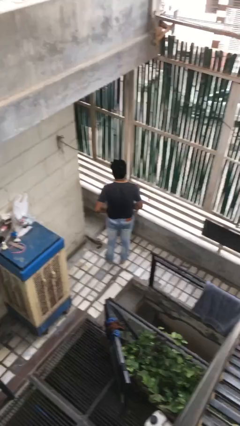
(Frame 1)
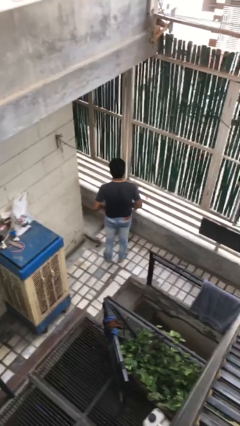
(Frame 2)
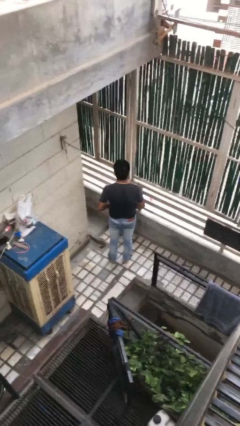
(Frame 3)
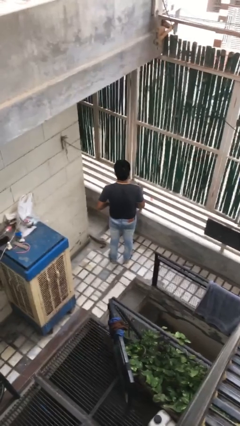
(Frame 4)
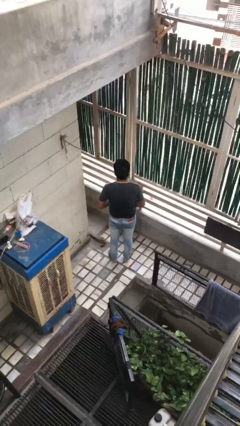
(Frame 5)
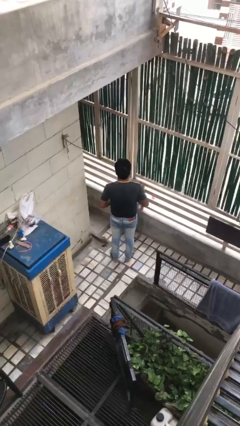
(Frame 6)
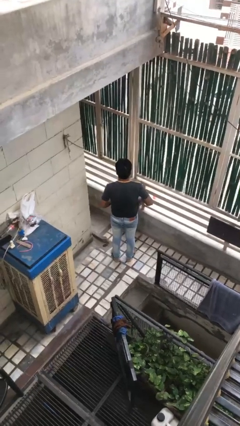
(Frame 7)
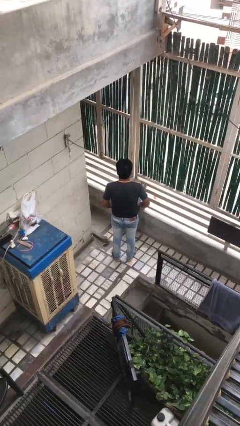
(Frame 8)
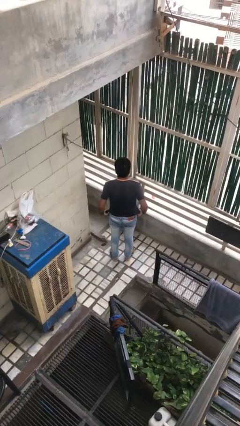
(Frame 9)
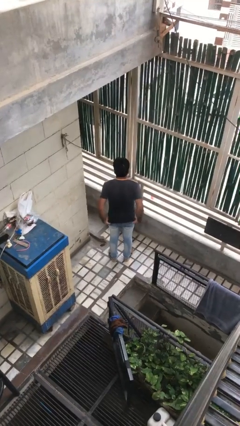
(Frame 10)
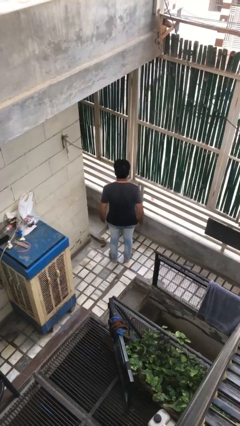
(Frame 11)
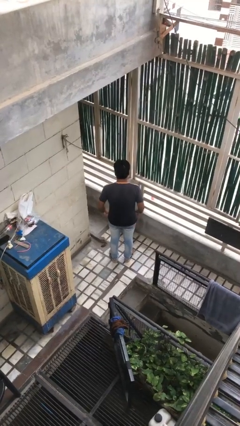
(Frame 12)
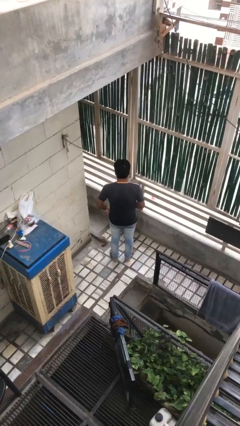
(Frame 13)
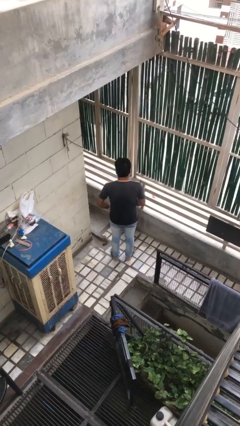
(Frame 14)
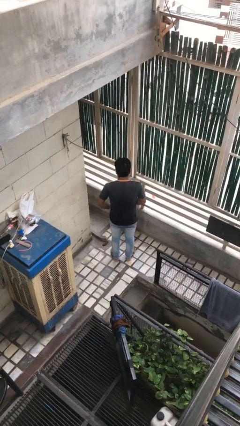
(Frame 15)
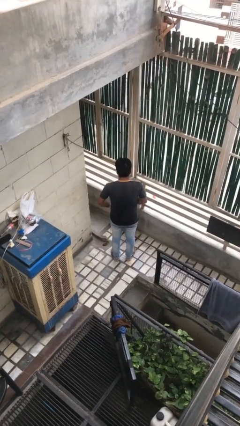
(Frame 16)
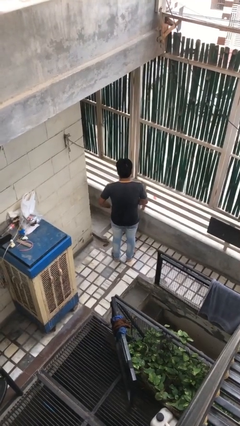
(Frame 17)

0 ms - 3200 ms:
person untucks shirt

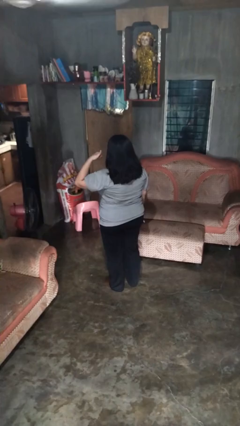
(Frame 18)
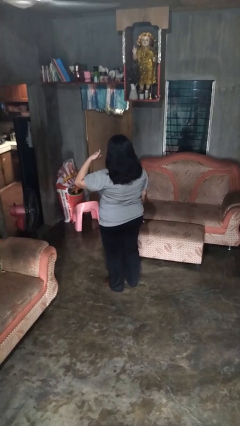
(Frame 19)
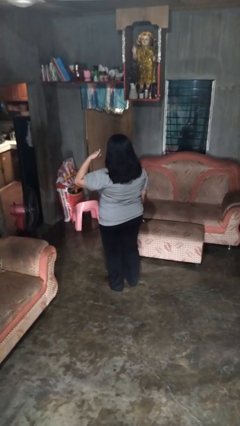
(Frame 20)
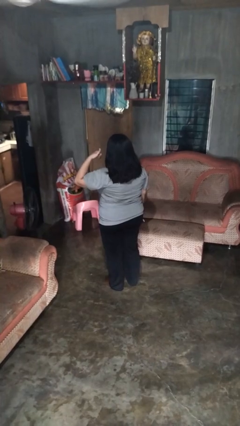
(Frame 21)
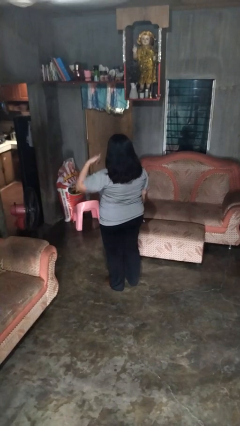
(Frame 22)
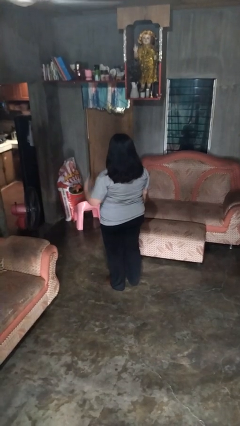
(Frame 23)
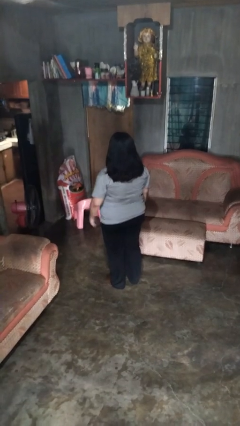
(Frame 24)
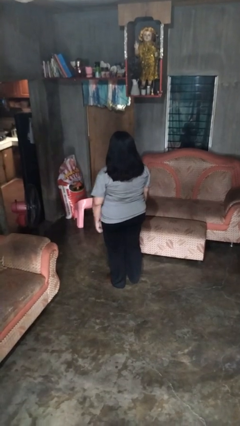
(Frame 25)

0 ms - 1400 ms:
person gestures call me

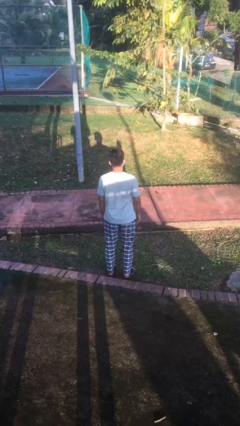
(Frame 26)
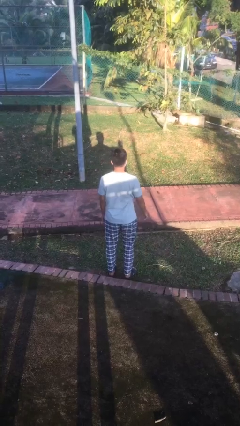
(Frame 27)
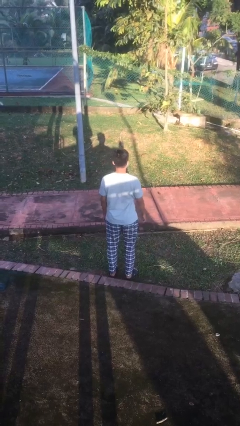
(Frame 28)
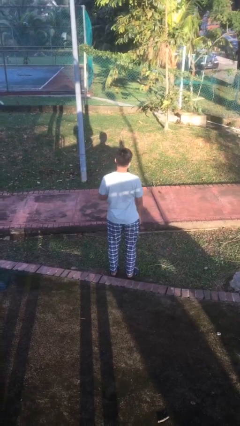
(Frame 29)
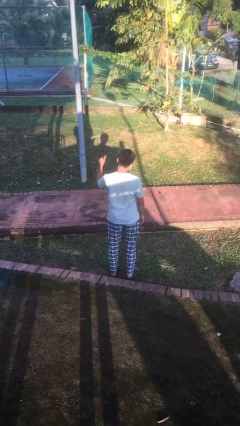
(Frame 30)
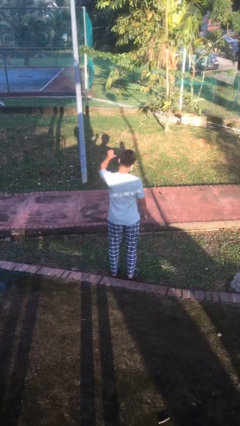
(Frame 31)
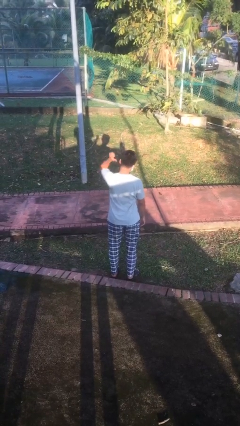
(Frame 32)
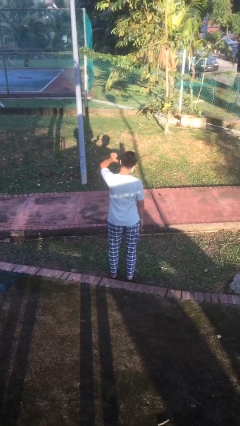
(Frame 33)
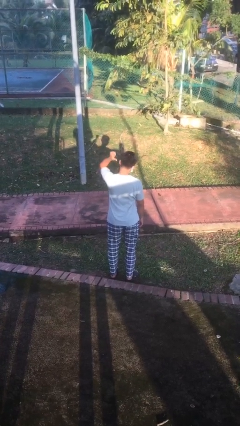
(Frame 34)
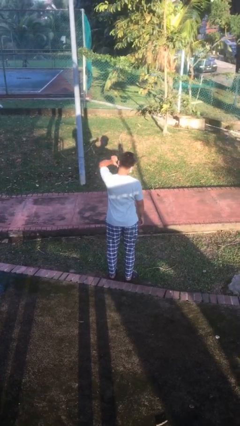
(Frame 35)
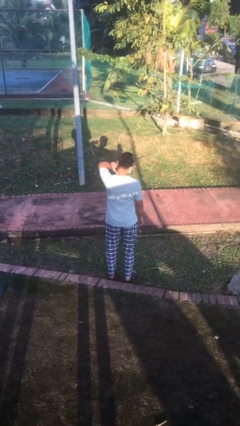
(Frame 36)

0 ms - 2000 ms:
person gestures behind me

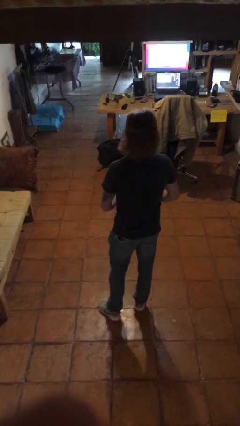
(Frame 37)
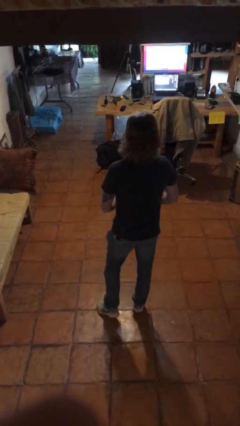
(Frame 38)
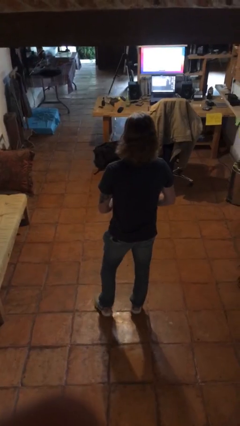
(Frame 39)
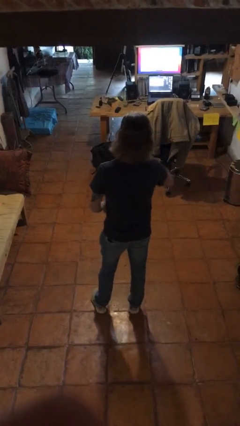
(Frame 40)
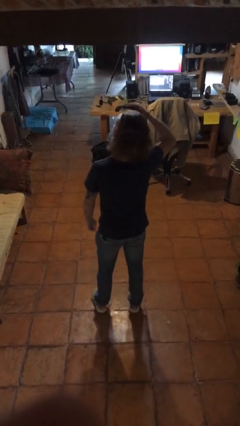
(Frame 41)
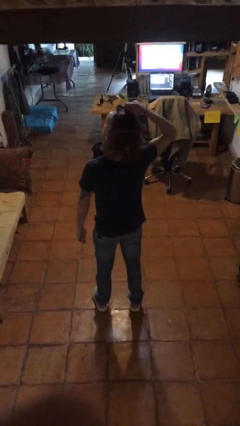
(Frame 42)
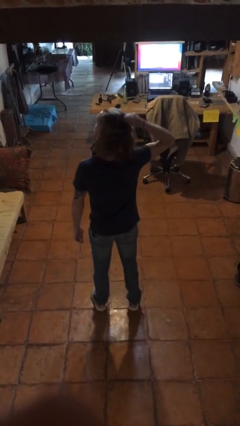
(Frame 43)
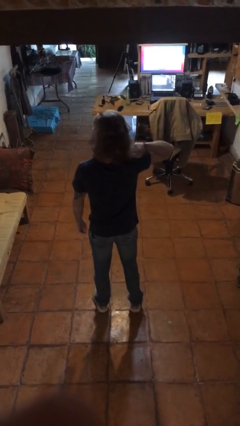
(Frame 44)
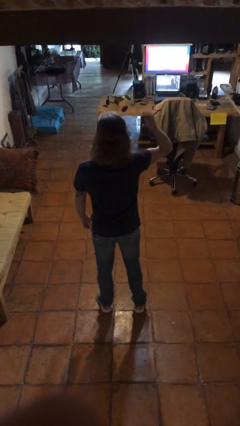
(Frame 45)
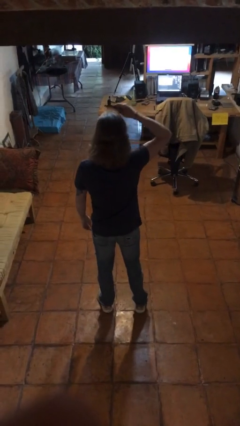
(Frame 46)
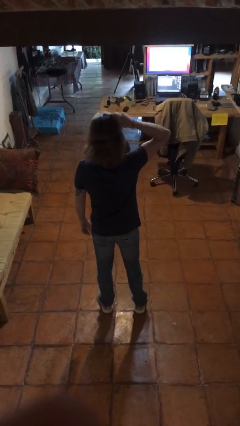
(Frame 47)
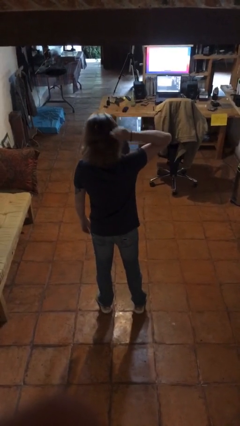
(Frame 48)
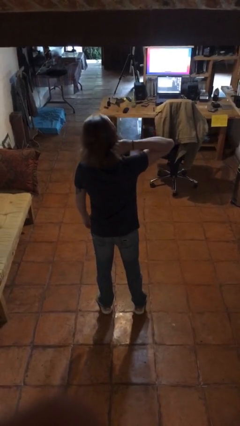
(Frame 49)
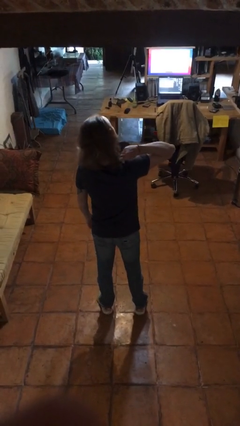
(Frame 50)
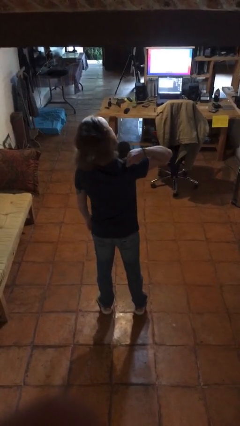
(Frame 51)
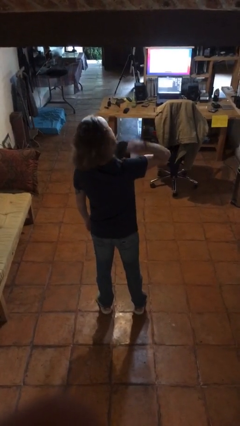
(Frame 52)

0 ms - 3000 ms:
person brushes hair

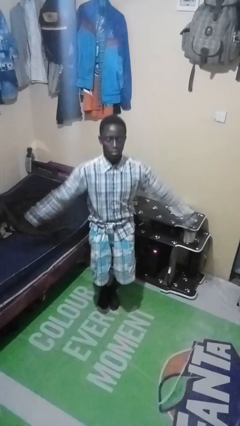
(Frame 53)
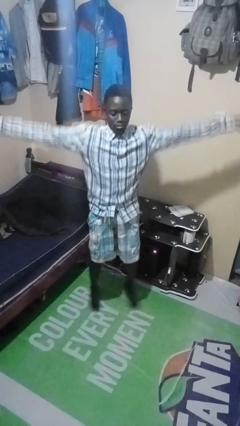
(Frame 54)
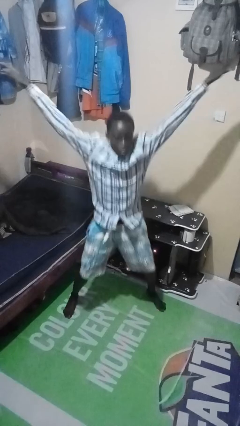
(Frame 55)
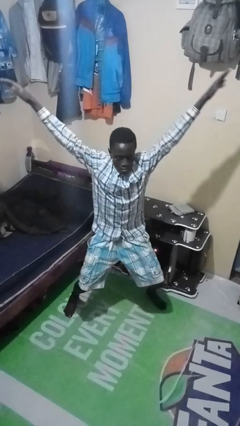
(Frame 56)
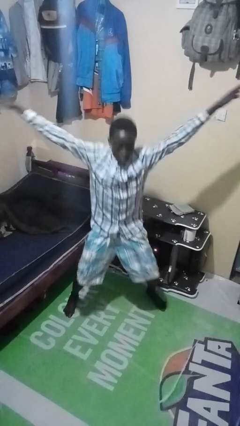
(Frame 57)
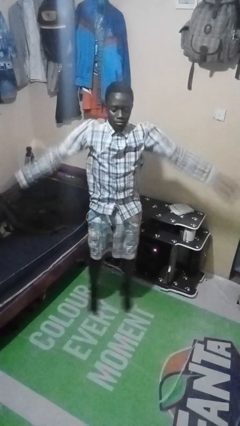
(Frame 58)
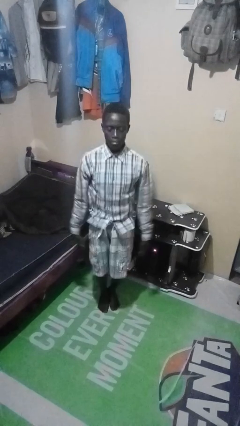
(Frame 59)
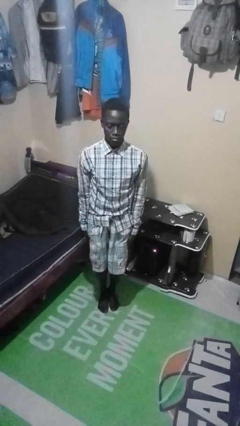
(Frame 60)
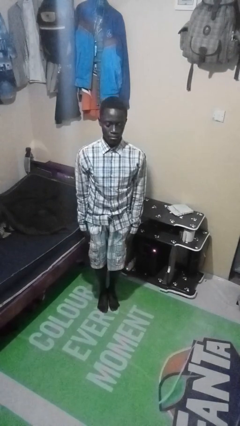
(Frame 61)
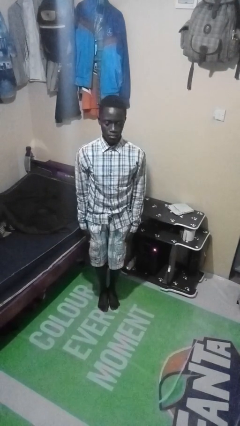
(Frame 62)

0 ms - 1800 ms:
person exercises with jumping jacks

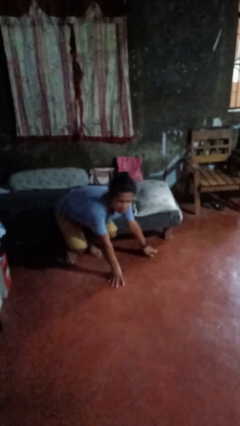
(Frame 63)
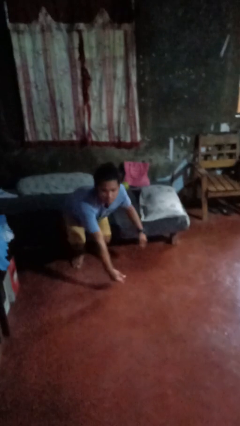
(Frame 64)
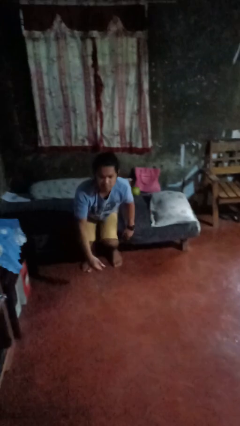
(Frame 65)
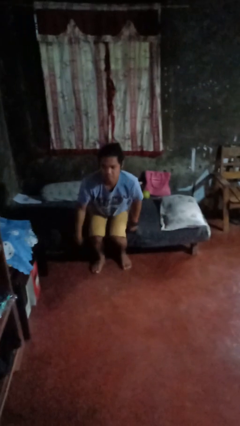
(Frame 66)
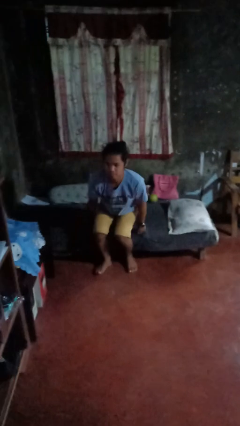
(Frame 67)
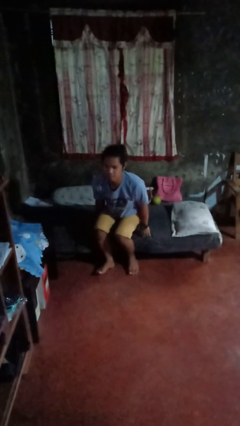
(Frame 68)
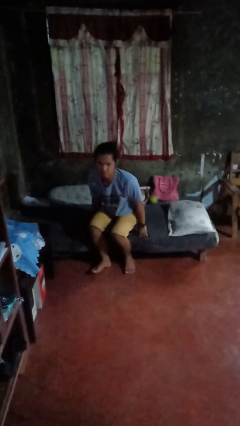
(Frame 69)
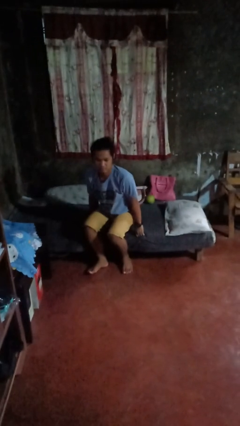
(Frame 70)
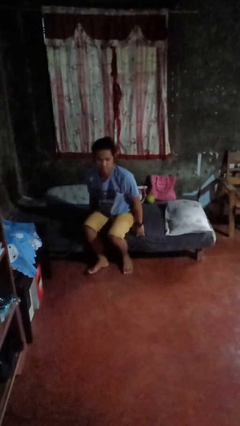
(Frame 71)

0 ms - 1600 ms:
person stands up from floor

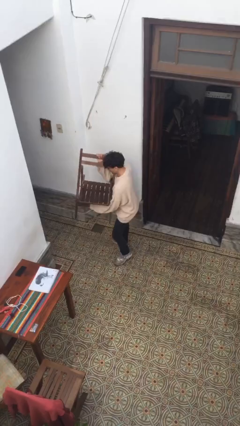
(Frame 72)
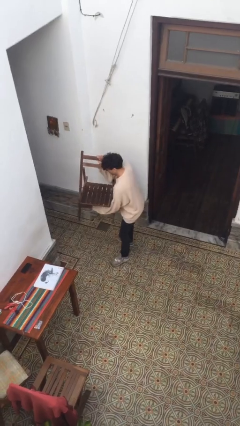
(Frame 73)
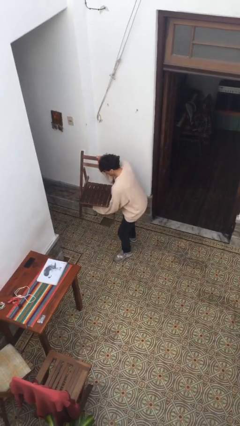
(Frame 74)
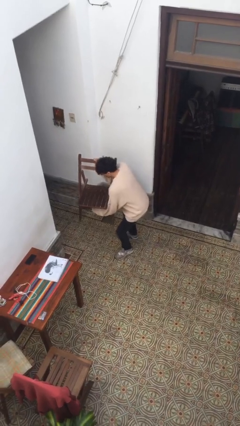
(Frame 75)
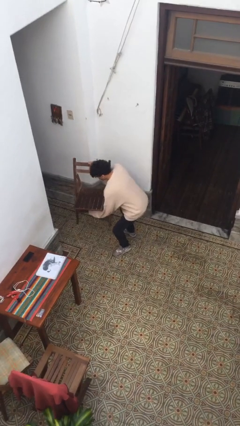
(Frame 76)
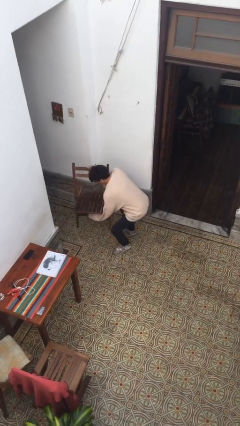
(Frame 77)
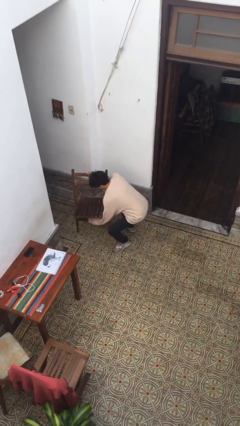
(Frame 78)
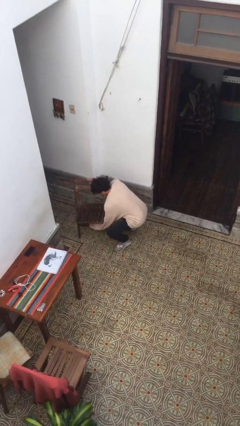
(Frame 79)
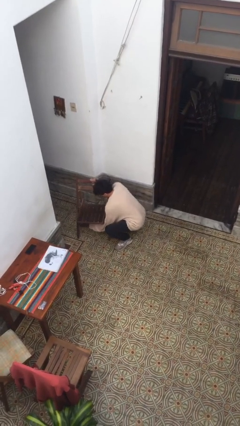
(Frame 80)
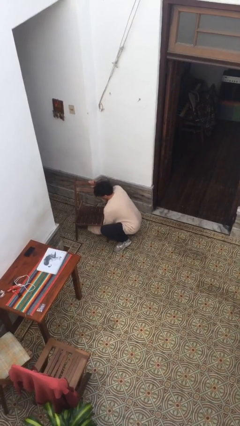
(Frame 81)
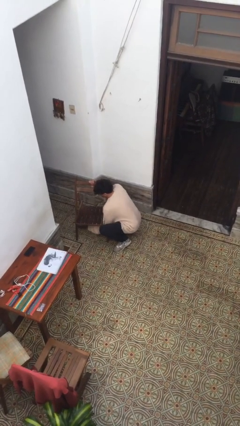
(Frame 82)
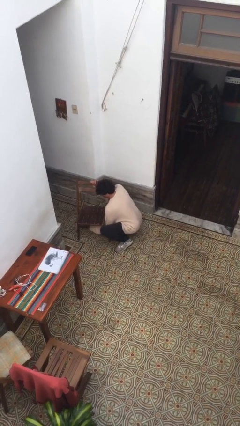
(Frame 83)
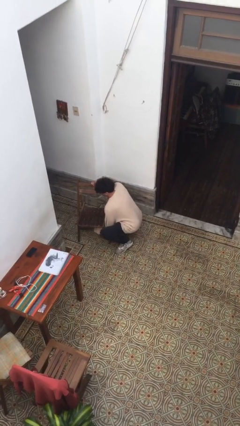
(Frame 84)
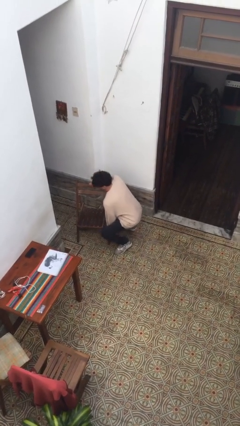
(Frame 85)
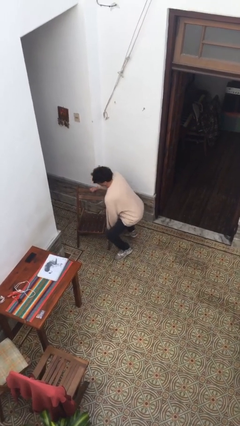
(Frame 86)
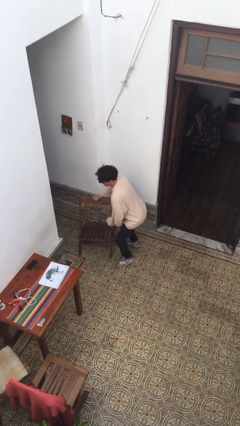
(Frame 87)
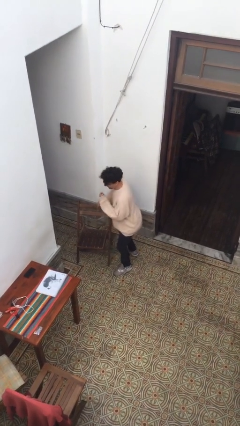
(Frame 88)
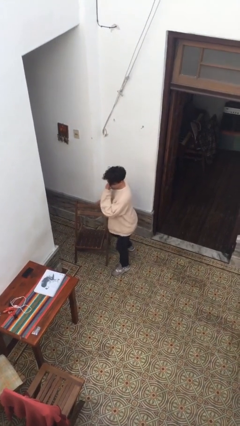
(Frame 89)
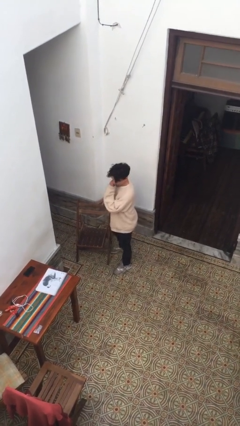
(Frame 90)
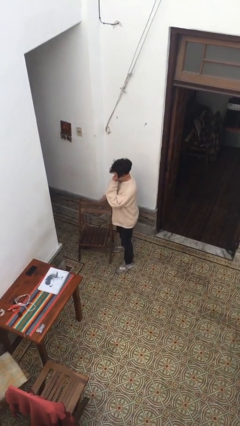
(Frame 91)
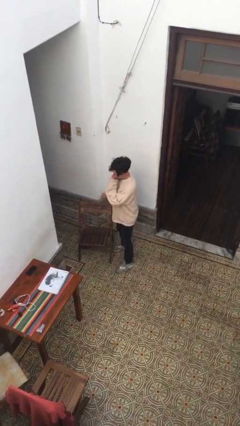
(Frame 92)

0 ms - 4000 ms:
person puts down object on floor

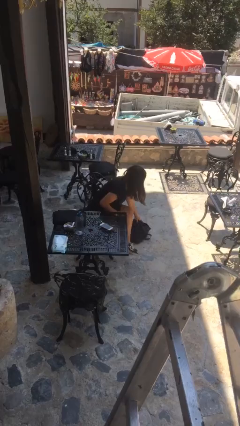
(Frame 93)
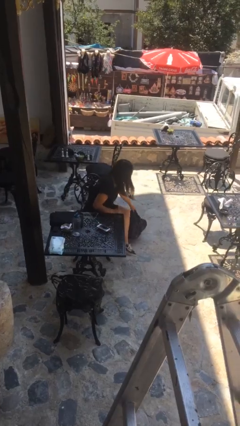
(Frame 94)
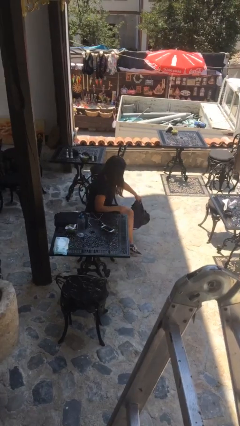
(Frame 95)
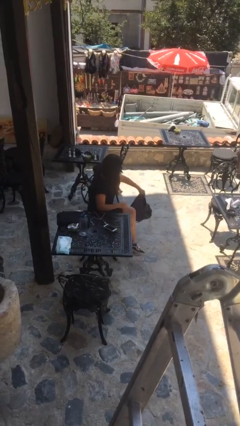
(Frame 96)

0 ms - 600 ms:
person picks up object from floor
